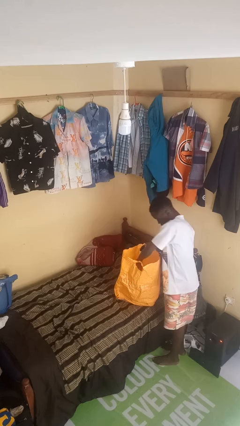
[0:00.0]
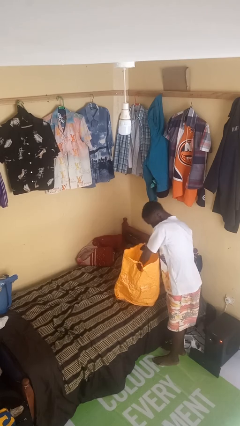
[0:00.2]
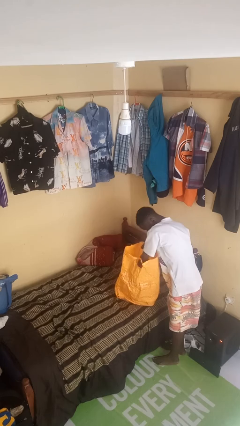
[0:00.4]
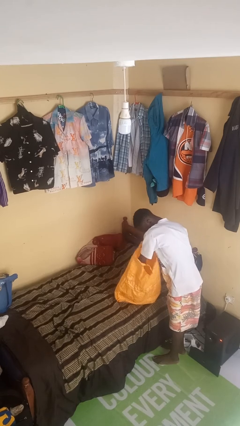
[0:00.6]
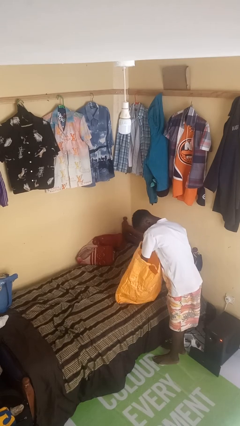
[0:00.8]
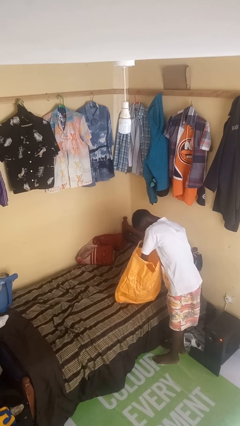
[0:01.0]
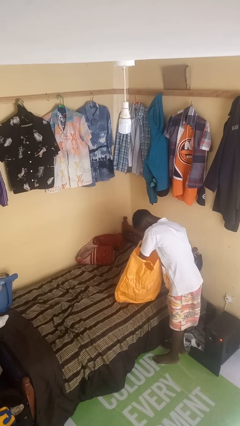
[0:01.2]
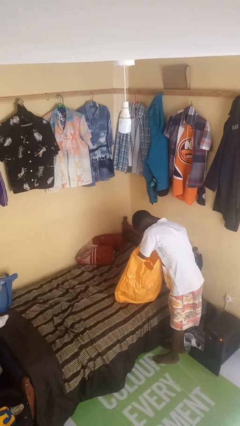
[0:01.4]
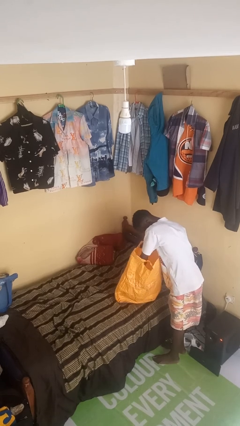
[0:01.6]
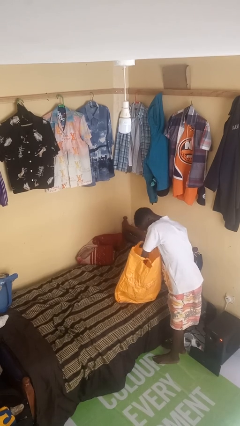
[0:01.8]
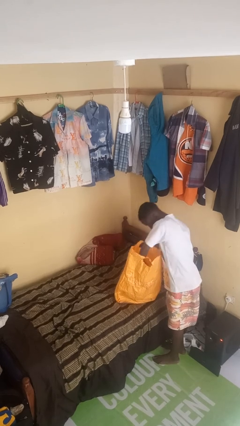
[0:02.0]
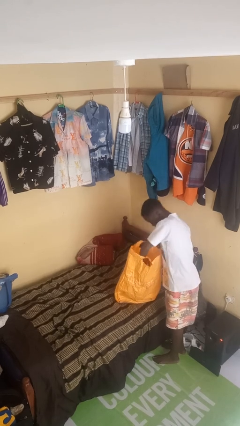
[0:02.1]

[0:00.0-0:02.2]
person searches in bag

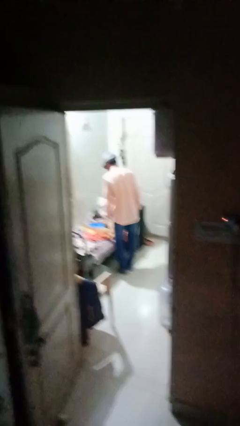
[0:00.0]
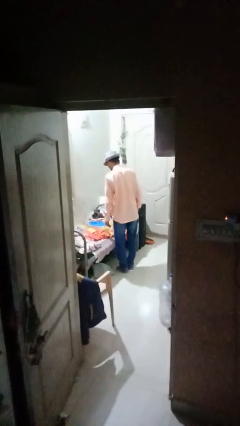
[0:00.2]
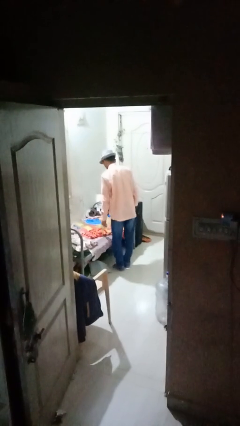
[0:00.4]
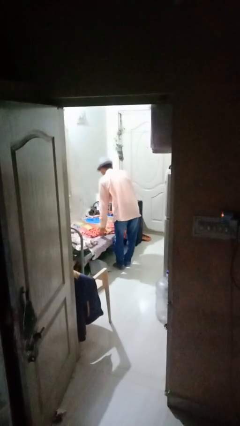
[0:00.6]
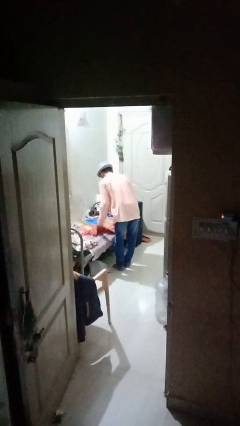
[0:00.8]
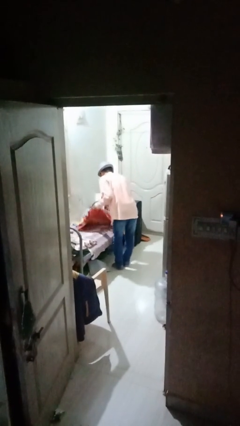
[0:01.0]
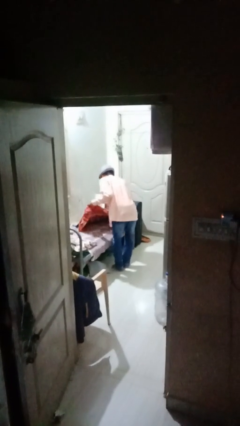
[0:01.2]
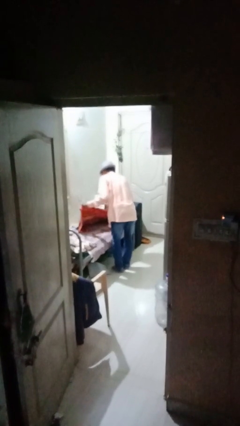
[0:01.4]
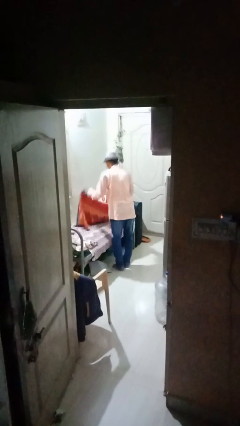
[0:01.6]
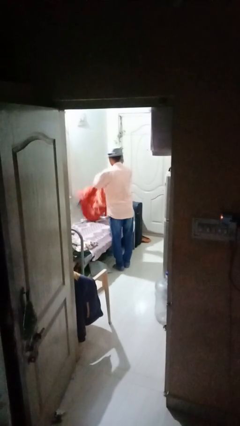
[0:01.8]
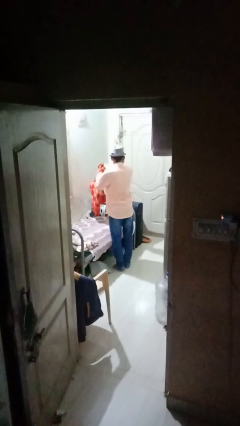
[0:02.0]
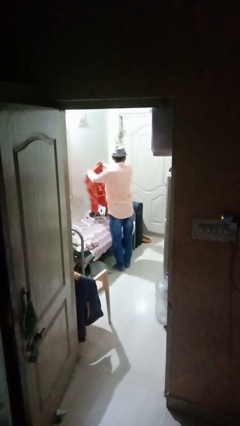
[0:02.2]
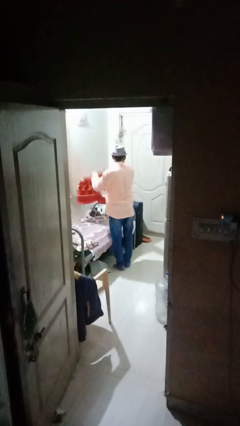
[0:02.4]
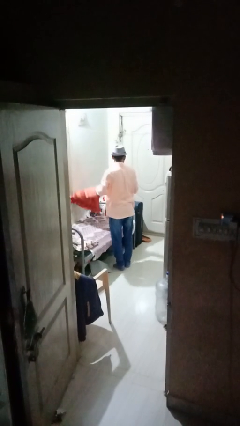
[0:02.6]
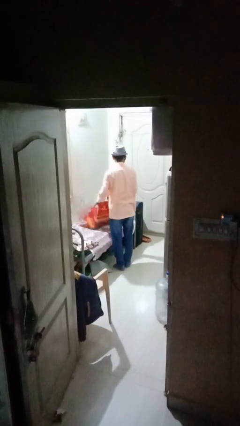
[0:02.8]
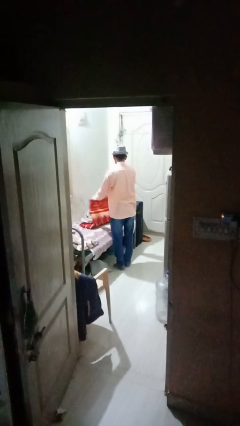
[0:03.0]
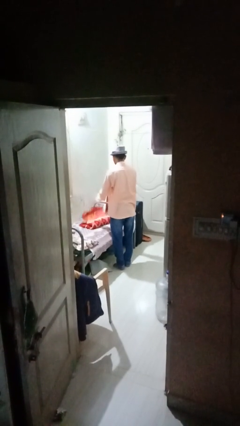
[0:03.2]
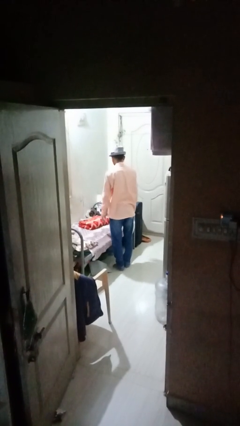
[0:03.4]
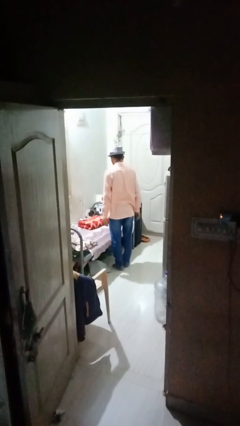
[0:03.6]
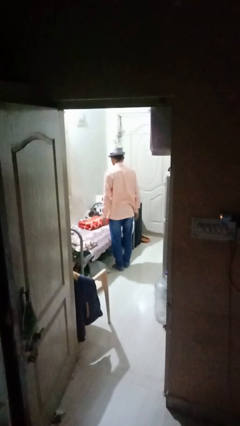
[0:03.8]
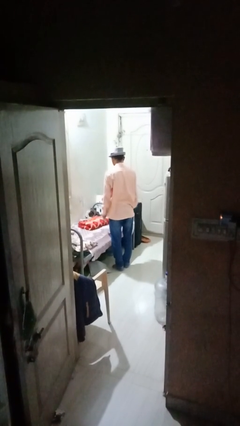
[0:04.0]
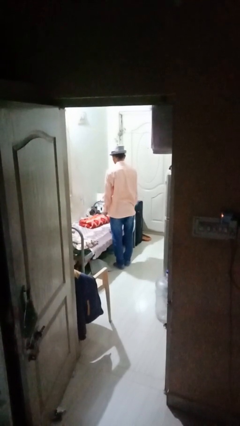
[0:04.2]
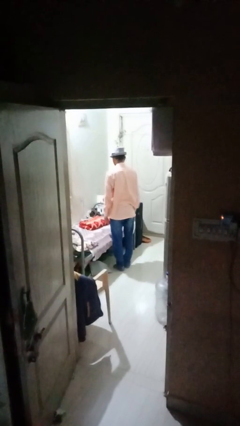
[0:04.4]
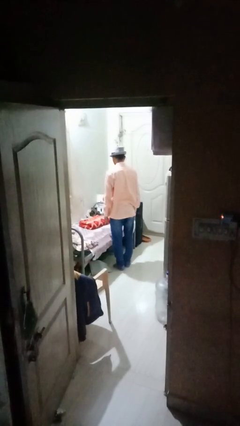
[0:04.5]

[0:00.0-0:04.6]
person folds blanket

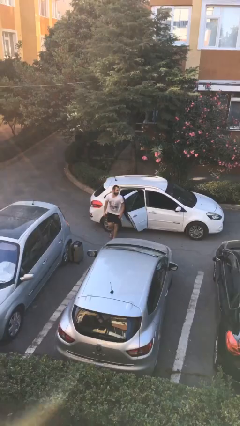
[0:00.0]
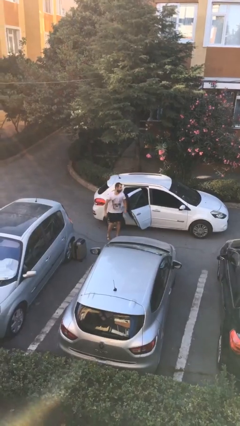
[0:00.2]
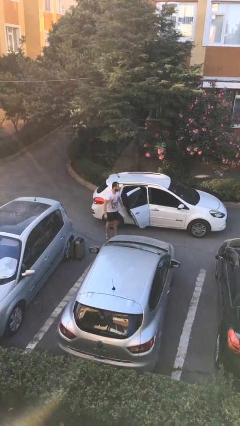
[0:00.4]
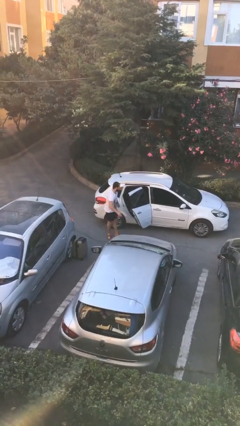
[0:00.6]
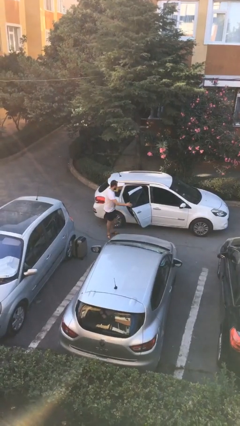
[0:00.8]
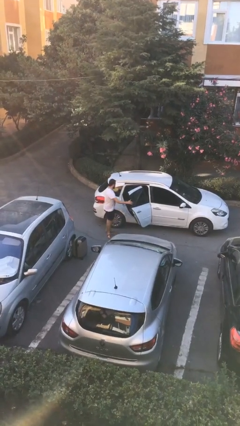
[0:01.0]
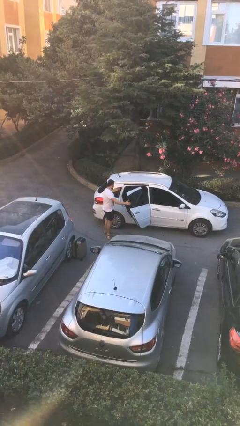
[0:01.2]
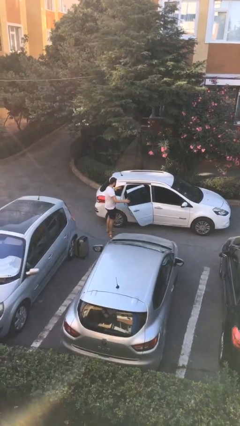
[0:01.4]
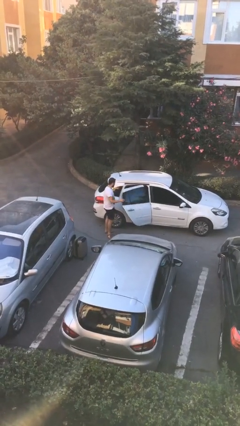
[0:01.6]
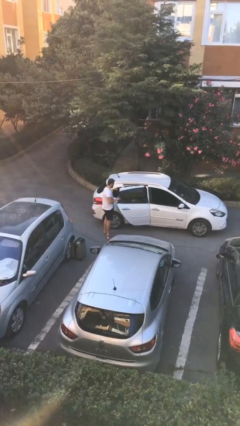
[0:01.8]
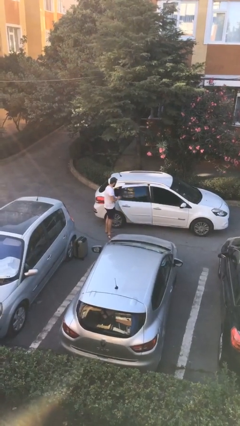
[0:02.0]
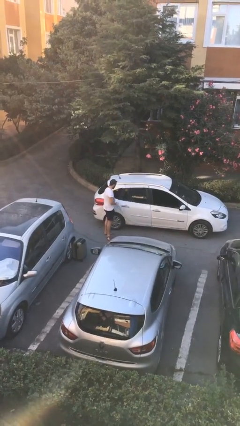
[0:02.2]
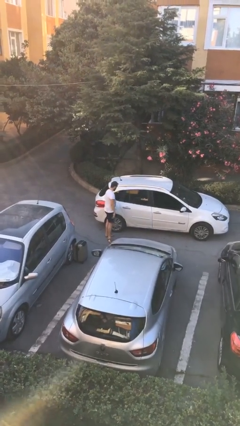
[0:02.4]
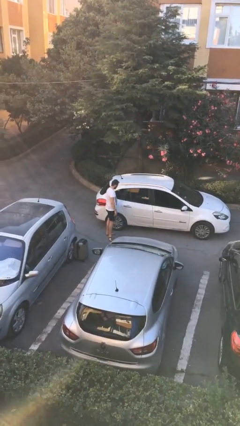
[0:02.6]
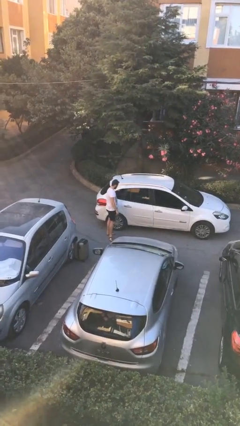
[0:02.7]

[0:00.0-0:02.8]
person closes car door

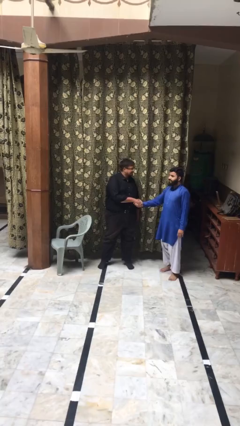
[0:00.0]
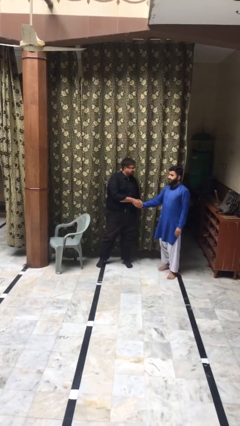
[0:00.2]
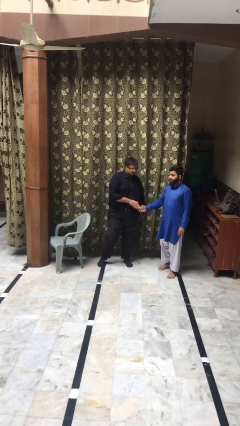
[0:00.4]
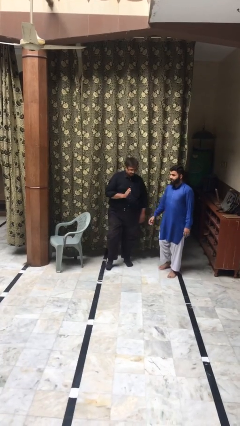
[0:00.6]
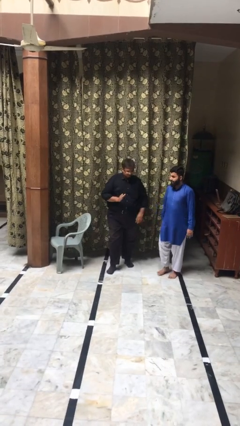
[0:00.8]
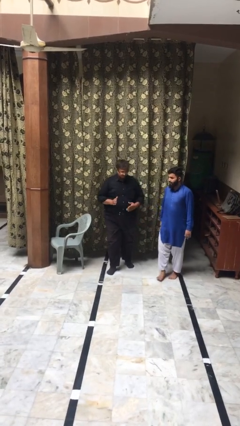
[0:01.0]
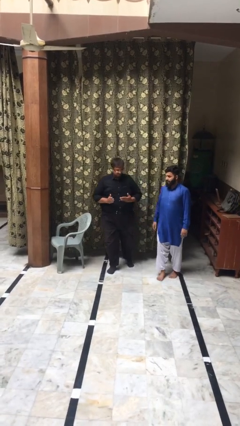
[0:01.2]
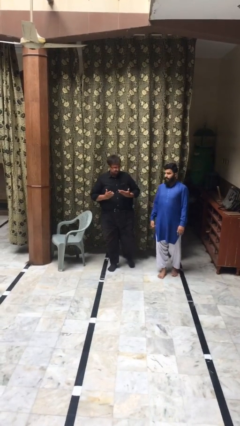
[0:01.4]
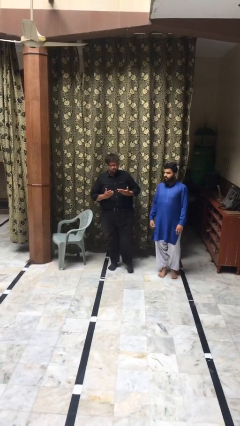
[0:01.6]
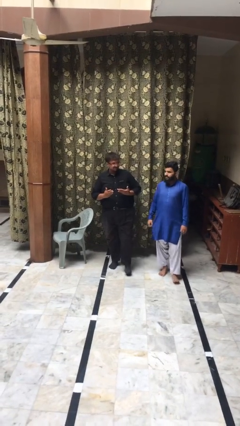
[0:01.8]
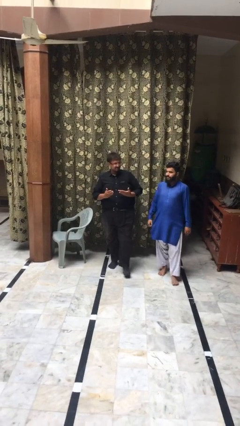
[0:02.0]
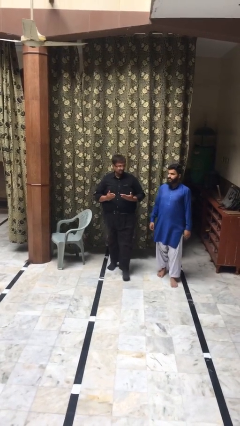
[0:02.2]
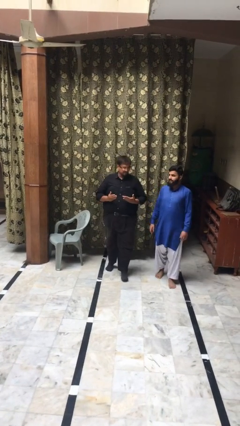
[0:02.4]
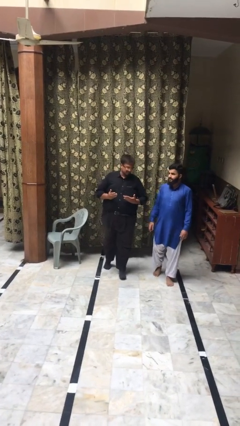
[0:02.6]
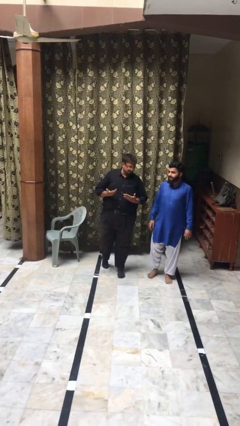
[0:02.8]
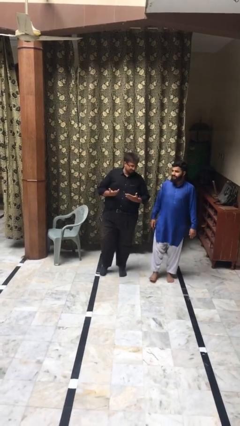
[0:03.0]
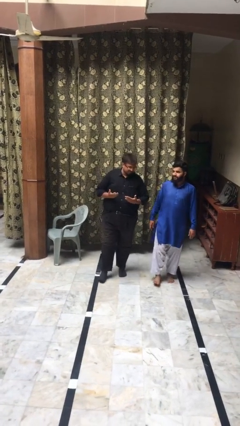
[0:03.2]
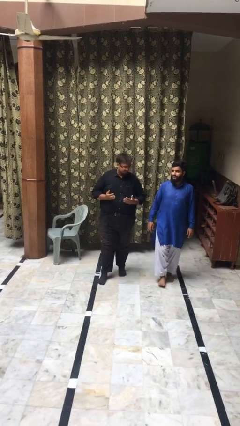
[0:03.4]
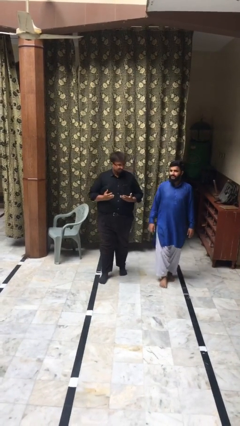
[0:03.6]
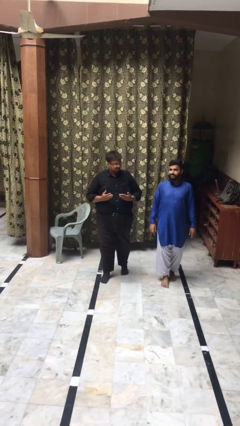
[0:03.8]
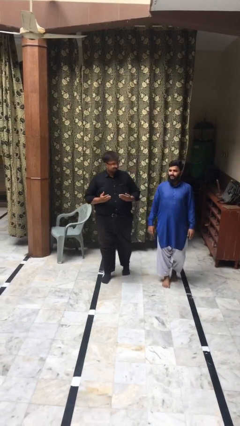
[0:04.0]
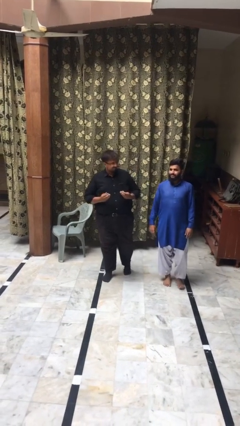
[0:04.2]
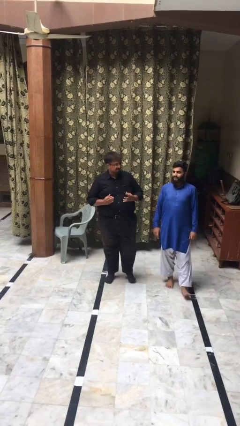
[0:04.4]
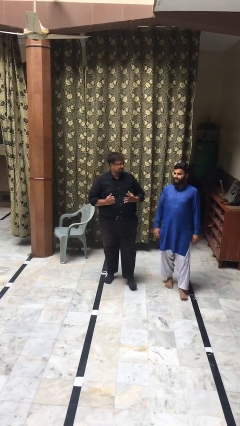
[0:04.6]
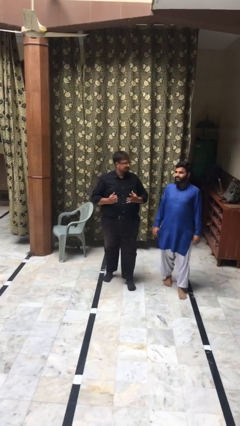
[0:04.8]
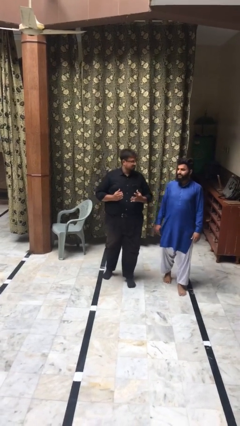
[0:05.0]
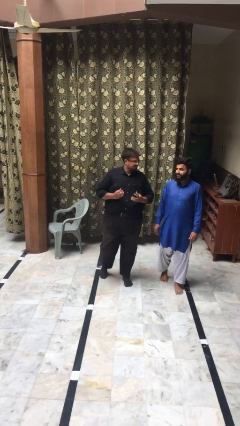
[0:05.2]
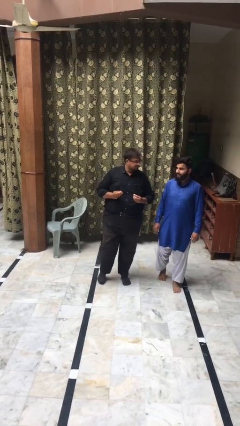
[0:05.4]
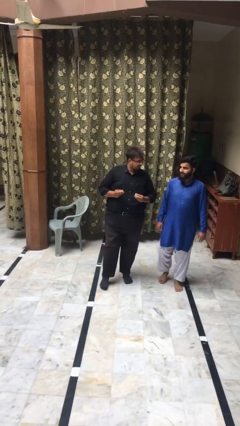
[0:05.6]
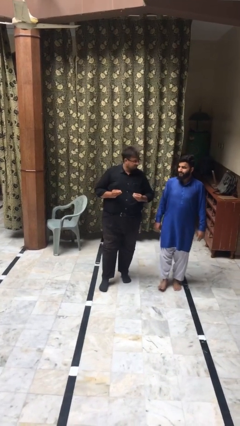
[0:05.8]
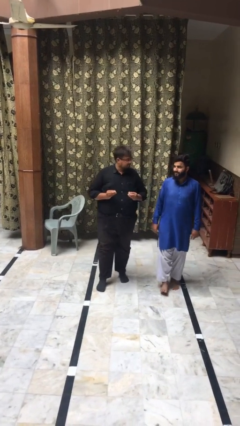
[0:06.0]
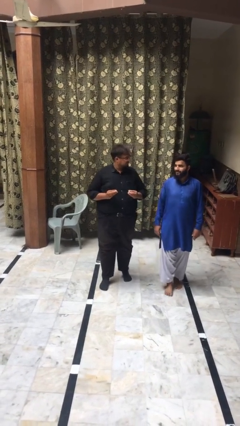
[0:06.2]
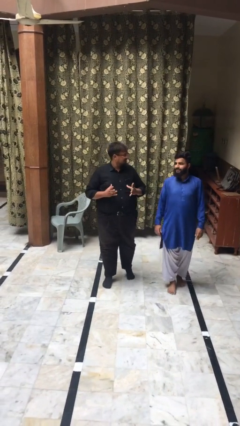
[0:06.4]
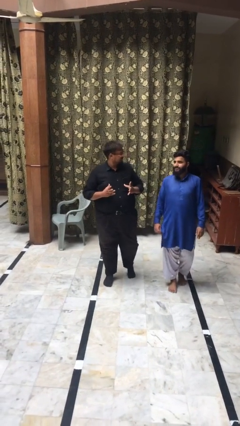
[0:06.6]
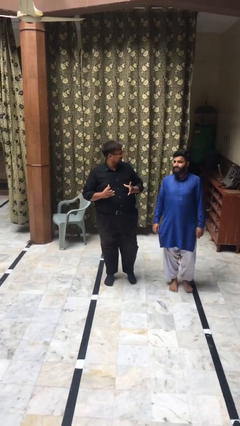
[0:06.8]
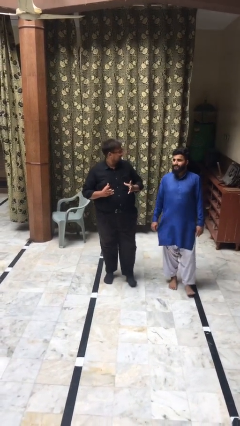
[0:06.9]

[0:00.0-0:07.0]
person talks to person

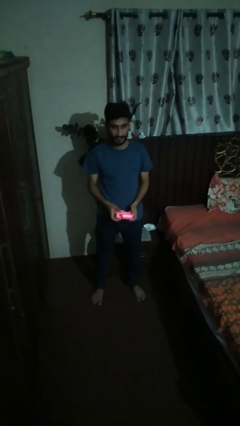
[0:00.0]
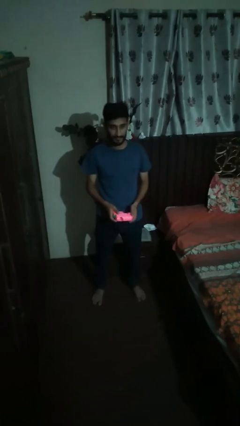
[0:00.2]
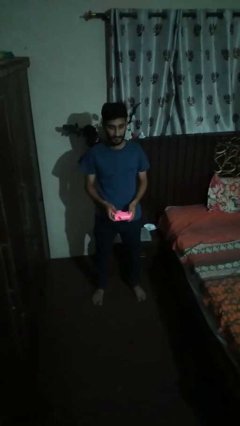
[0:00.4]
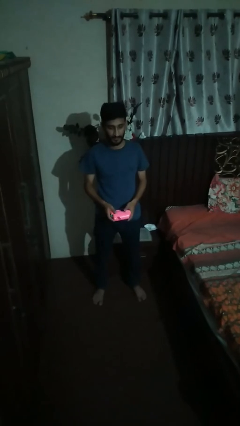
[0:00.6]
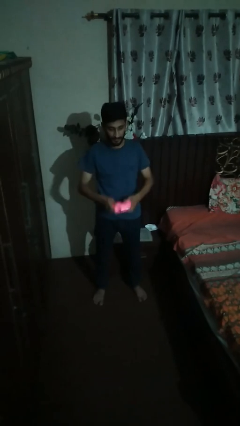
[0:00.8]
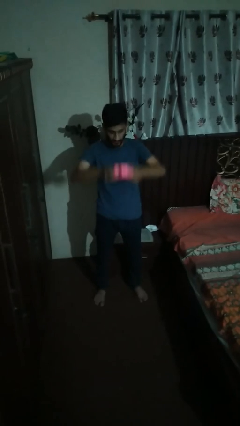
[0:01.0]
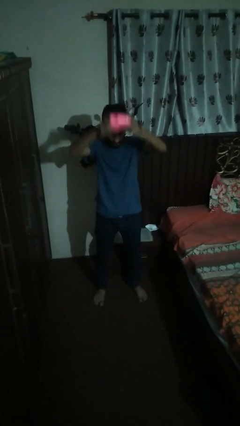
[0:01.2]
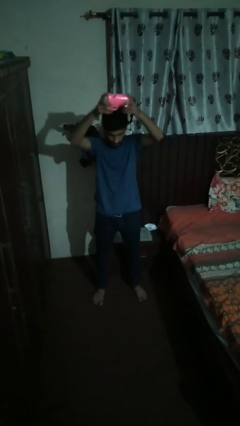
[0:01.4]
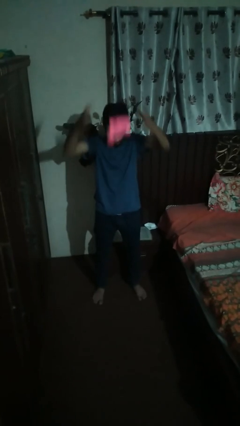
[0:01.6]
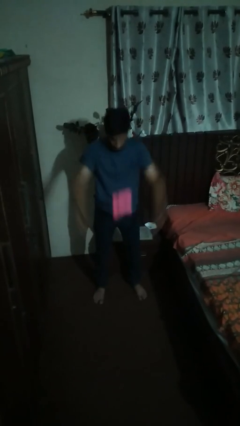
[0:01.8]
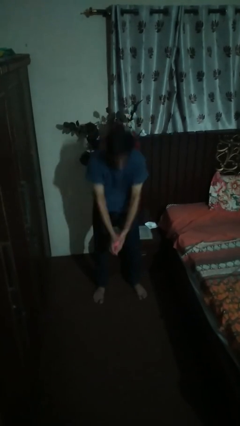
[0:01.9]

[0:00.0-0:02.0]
person drops object
